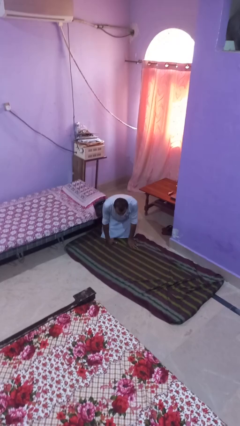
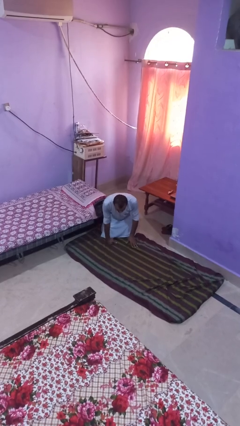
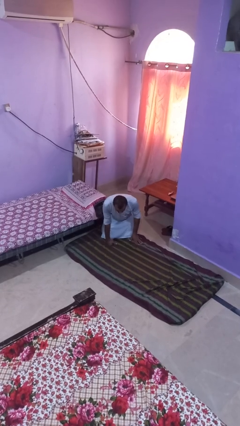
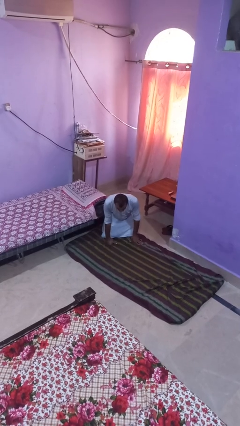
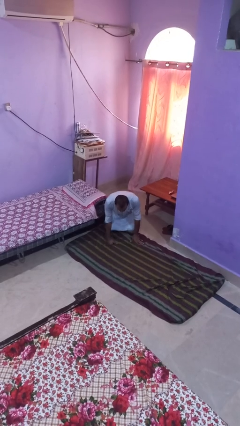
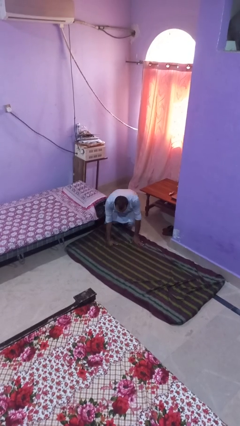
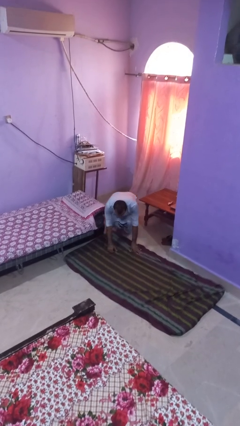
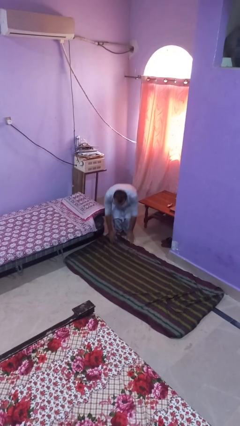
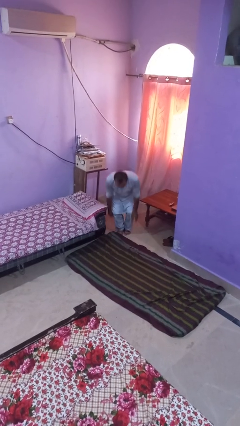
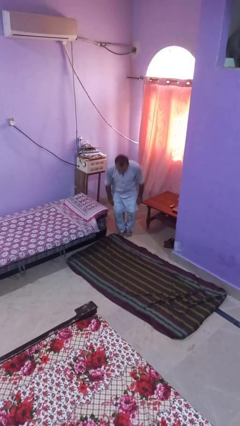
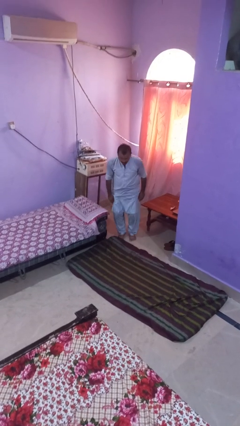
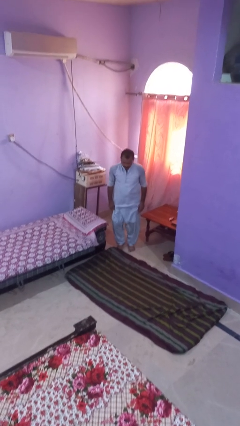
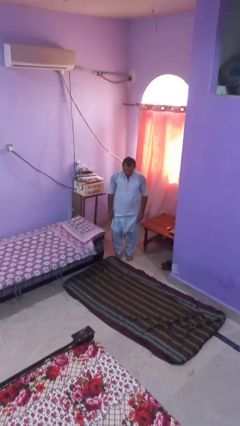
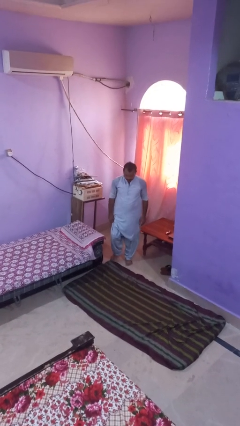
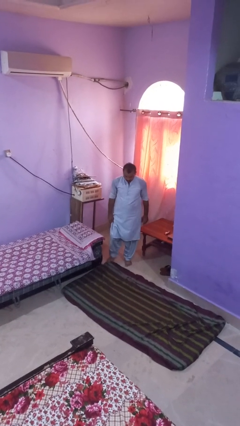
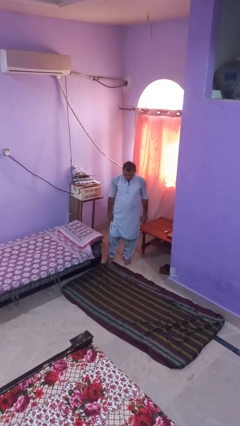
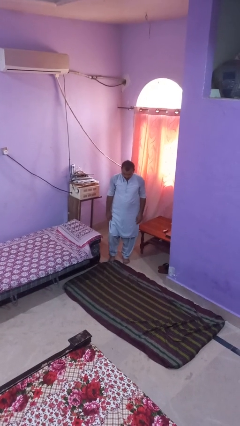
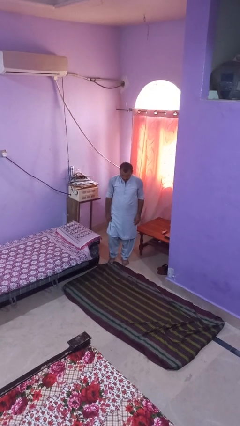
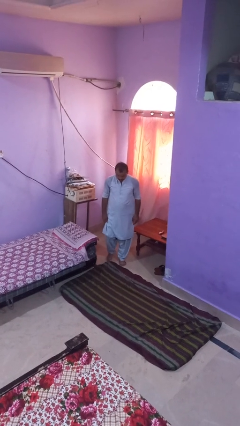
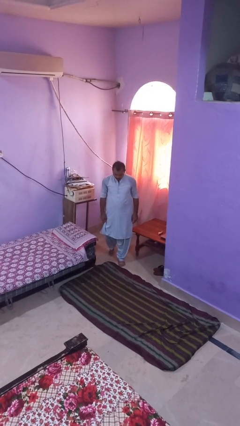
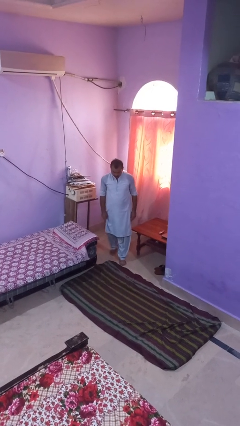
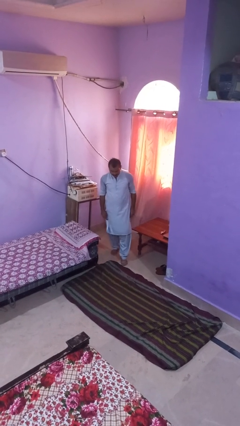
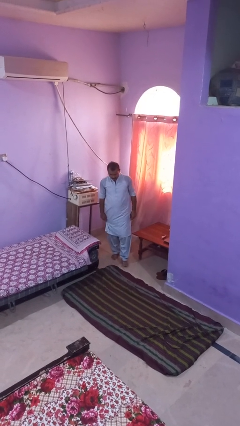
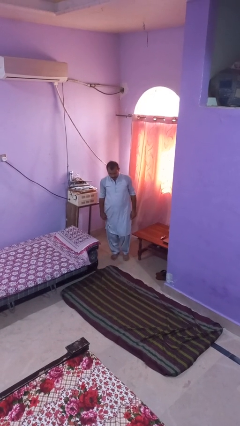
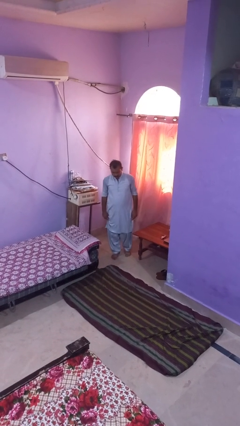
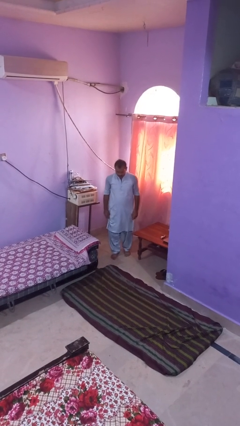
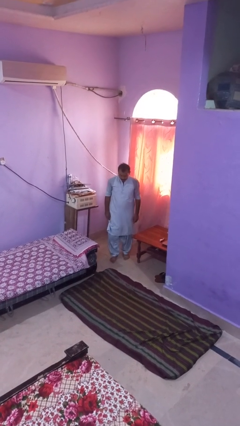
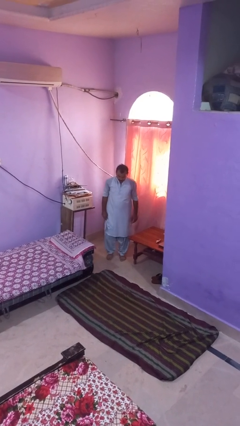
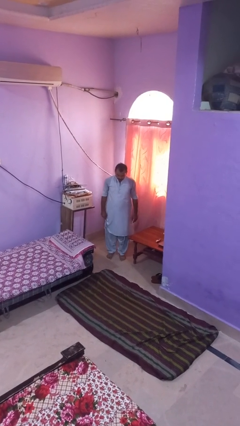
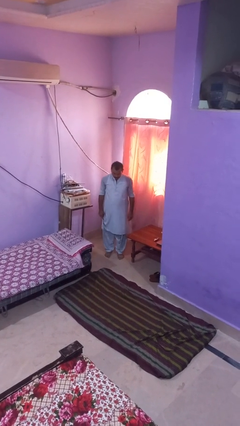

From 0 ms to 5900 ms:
person stands up from floor

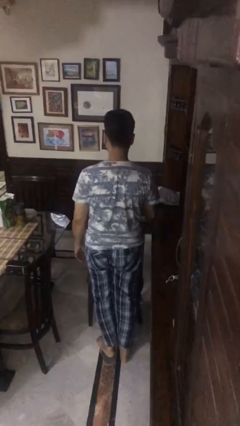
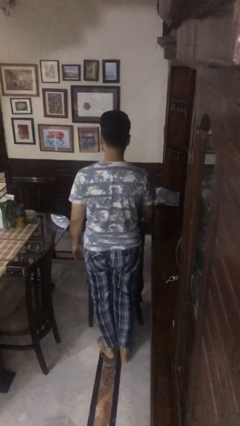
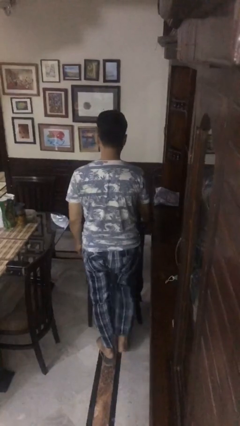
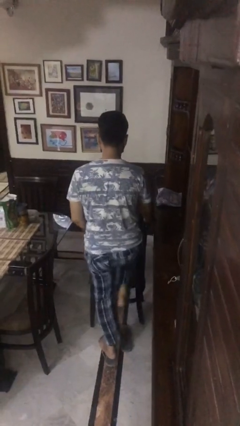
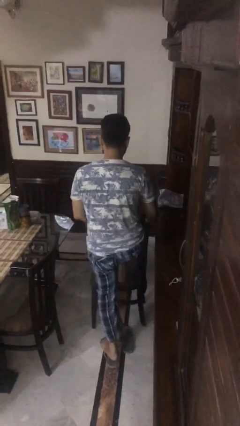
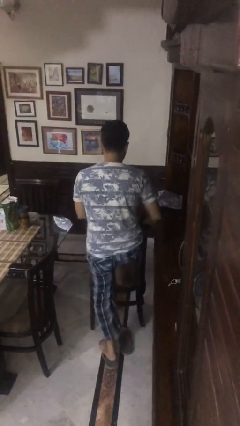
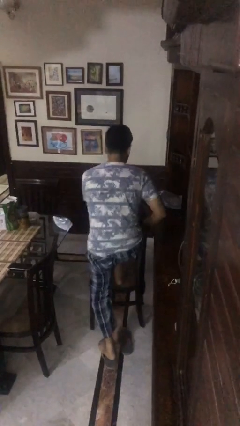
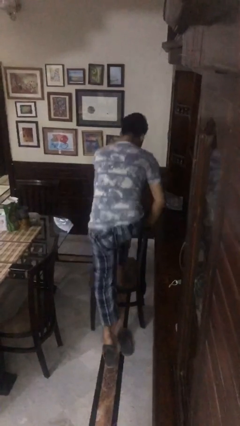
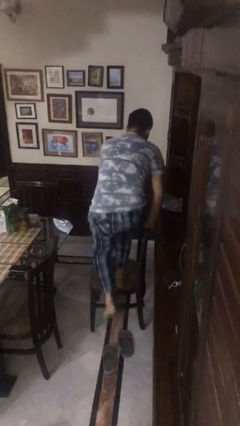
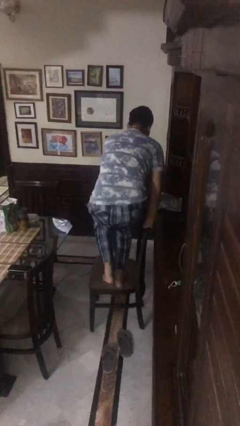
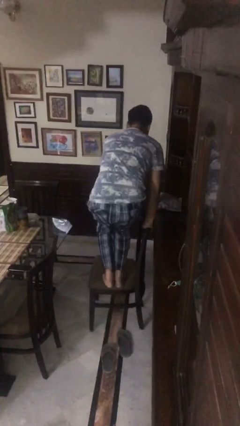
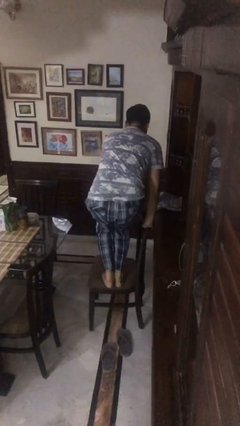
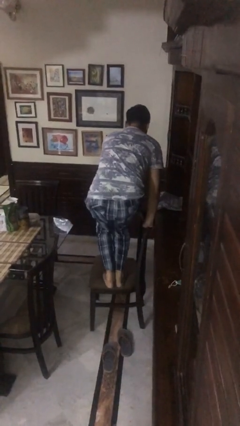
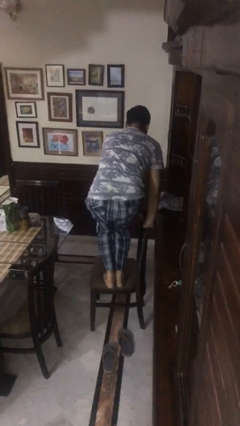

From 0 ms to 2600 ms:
person climbs on chair

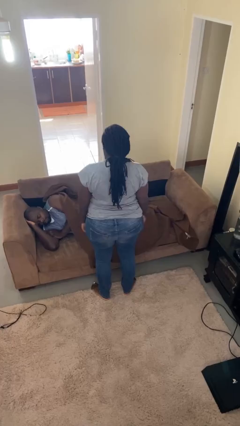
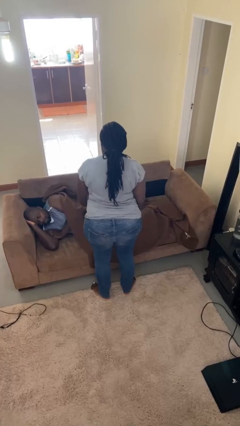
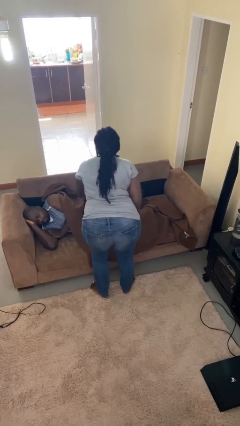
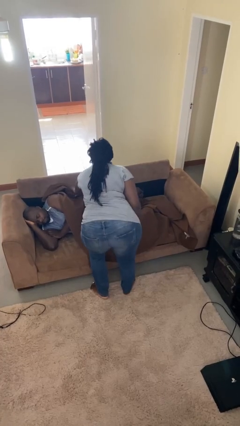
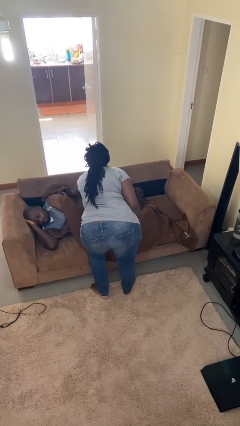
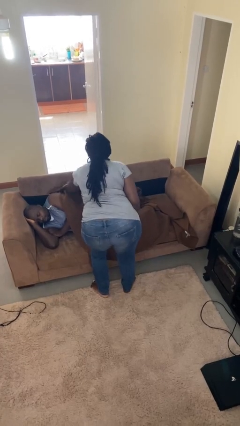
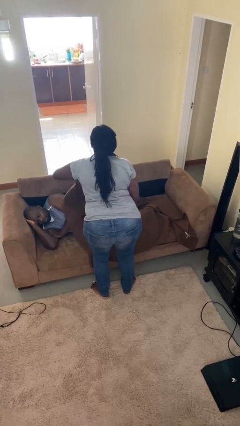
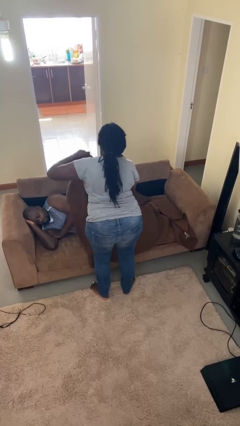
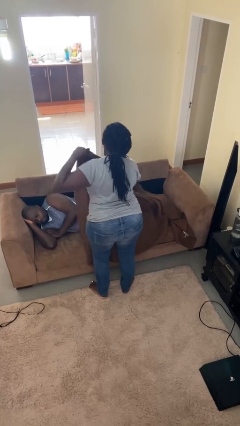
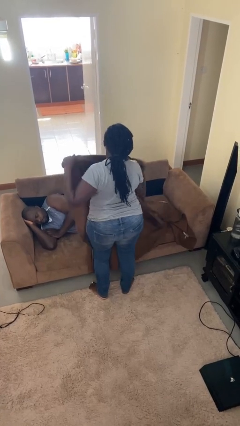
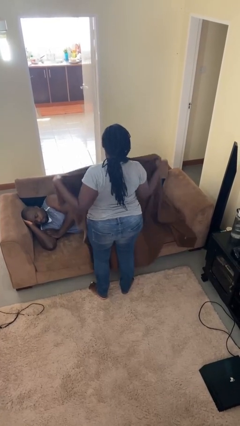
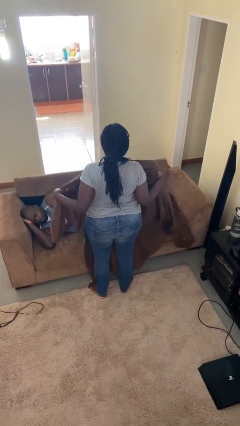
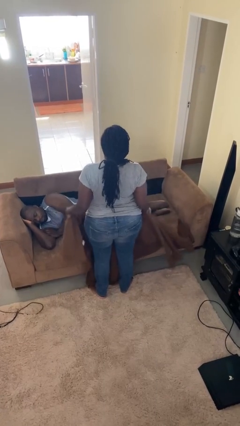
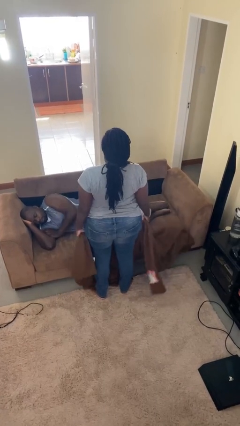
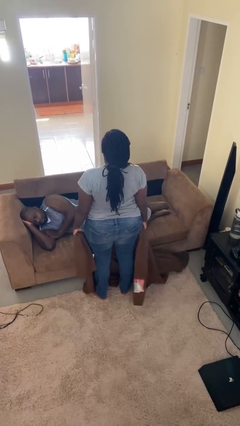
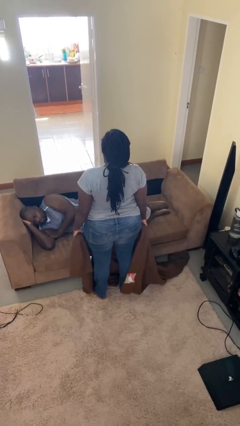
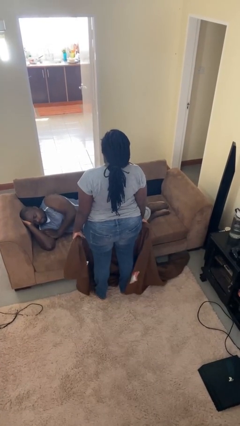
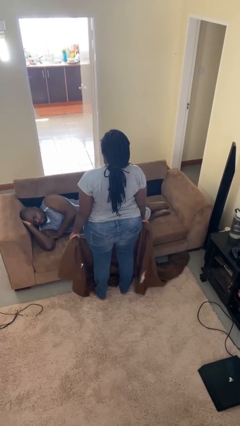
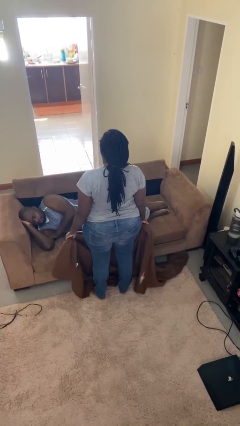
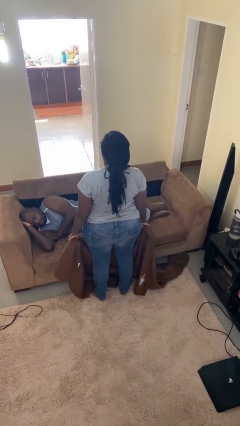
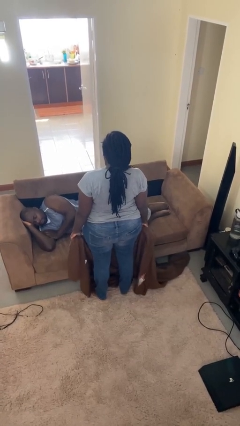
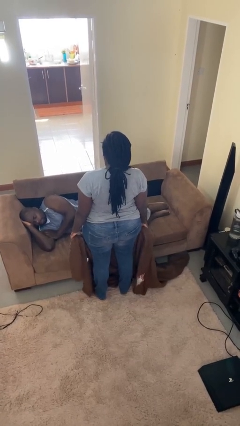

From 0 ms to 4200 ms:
person uncovers friend with blanket

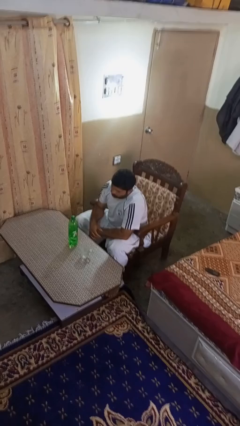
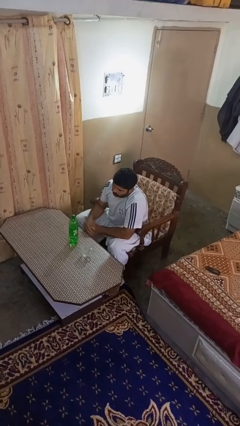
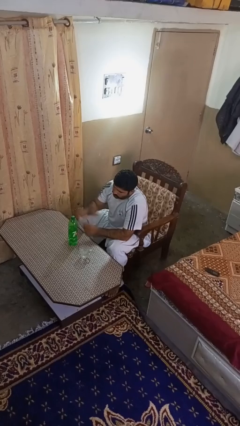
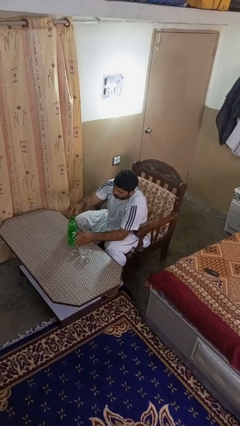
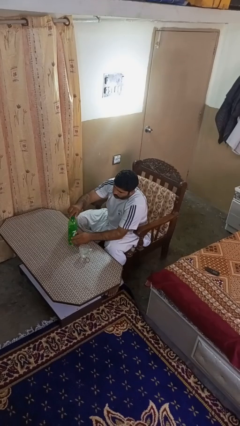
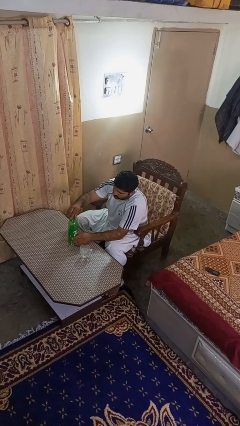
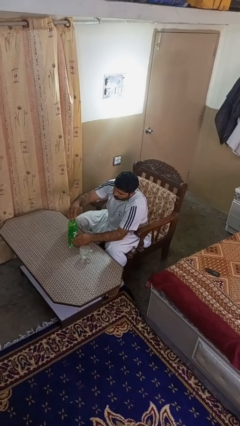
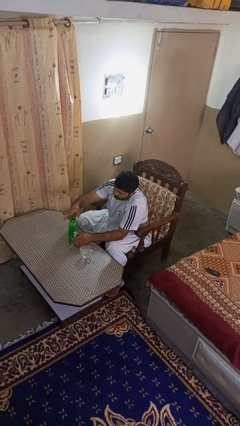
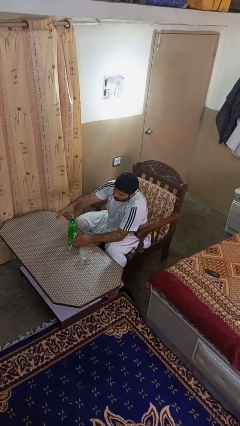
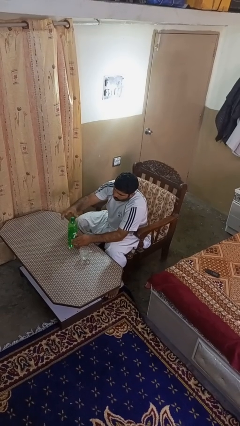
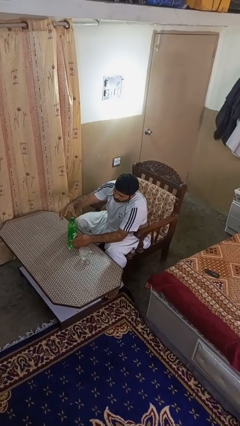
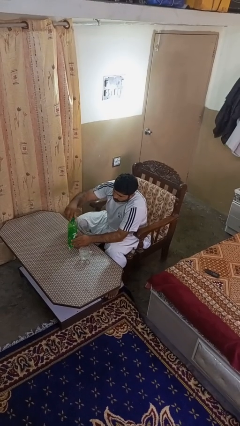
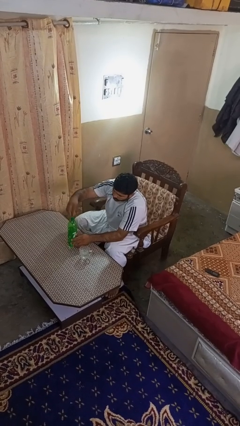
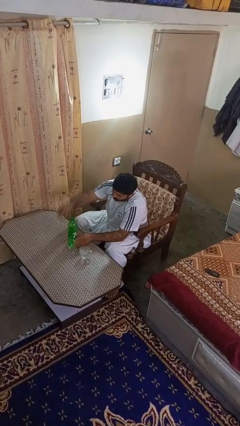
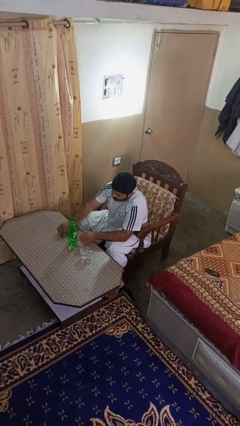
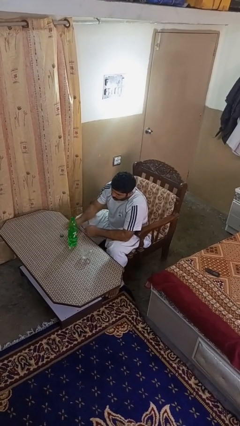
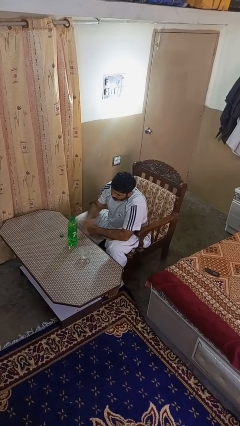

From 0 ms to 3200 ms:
person unscrews lid from bottle

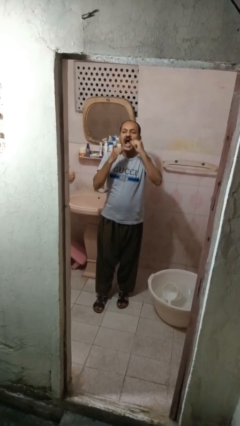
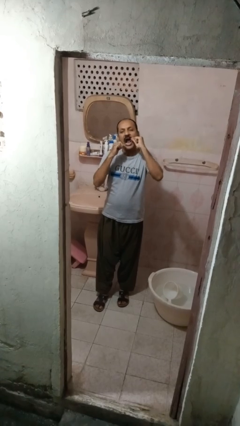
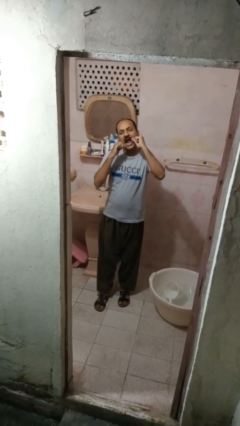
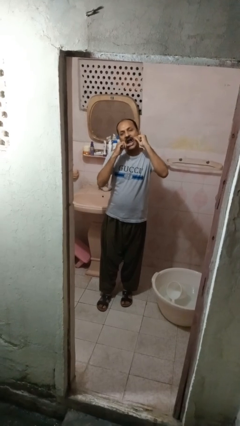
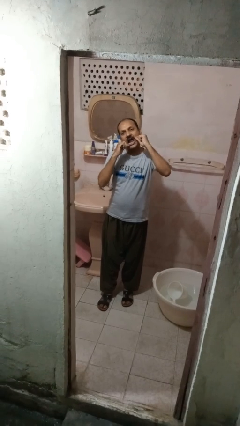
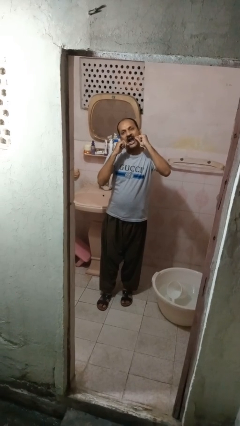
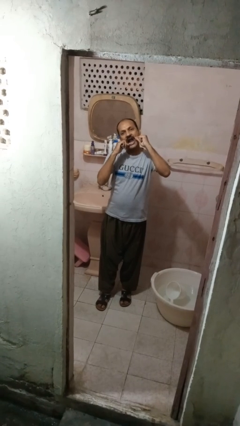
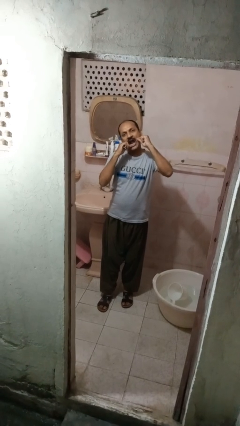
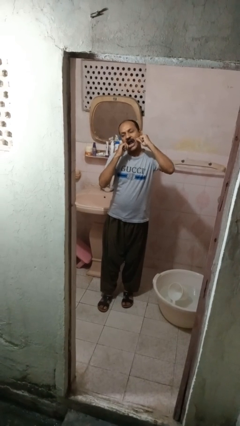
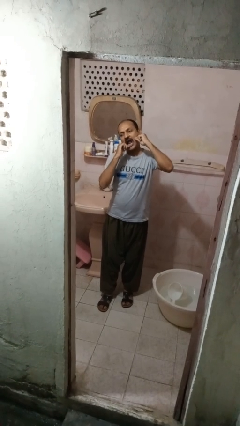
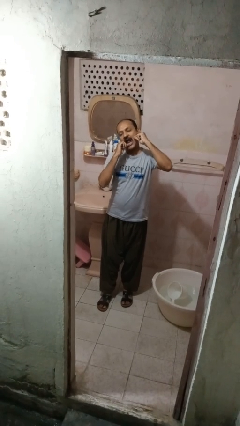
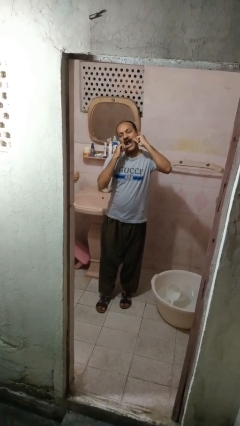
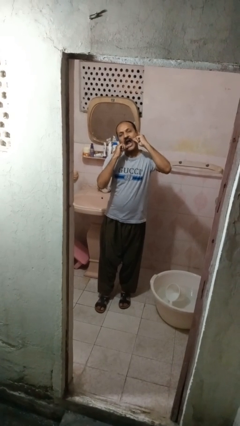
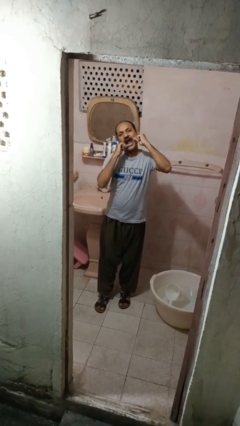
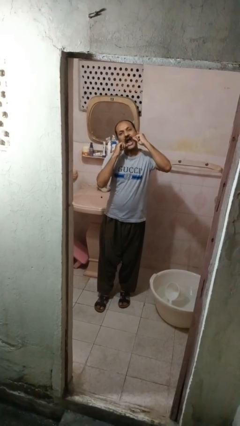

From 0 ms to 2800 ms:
person flosses
